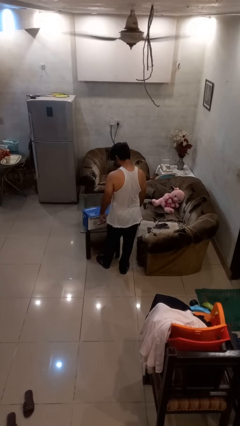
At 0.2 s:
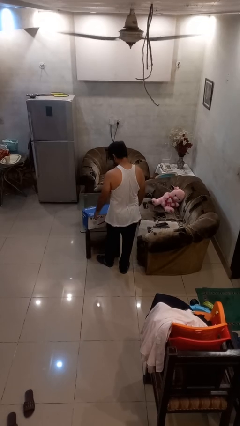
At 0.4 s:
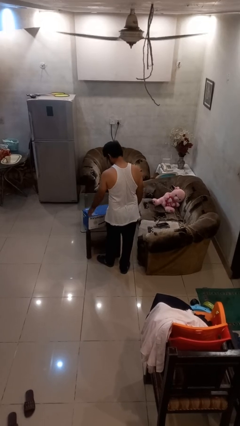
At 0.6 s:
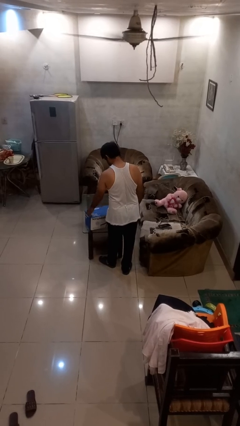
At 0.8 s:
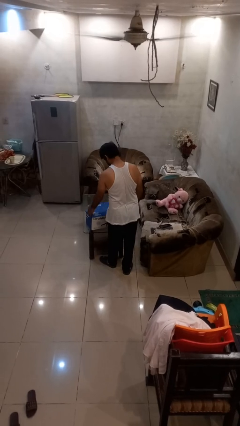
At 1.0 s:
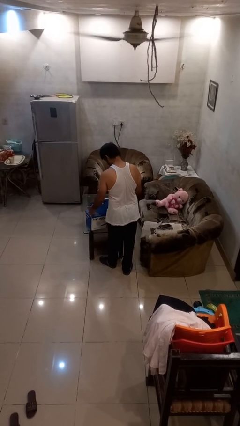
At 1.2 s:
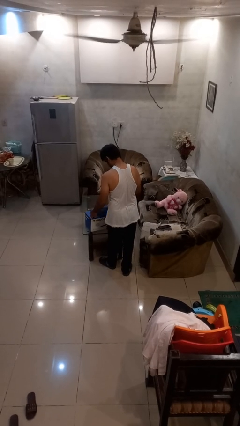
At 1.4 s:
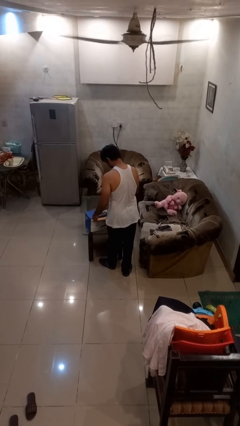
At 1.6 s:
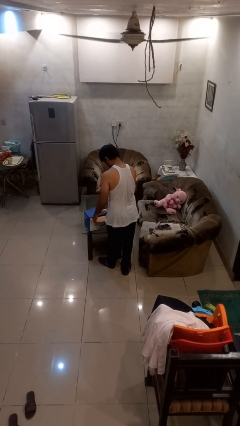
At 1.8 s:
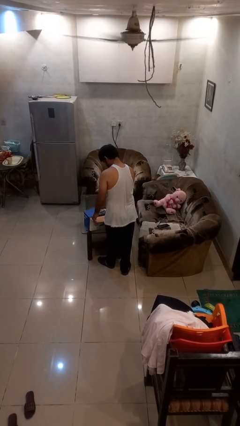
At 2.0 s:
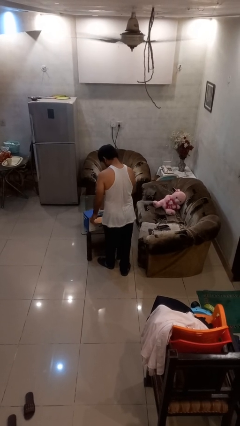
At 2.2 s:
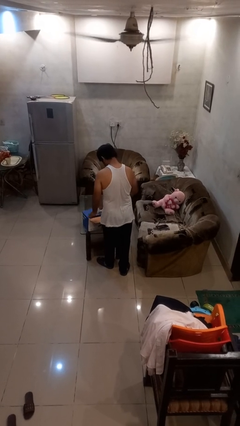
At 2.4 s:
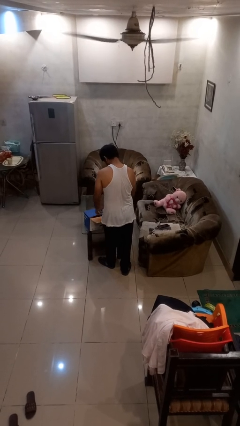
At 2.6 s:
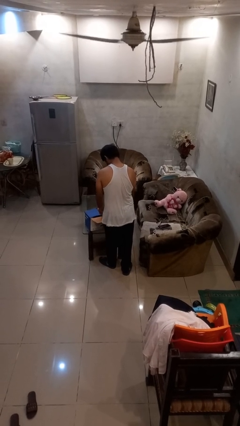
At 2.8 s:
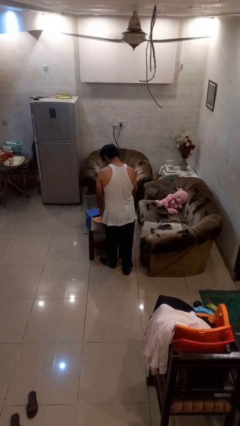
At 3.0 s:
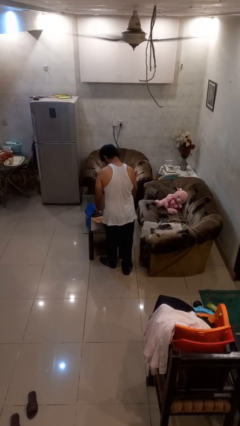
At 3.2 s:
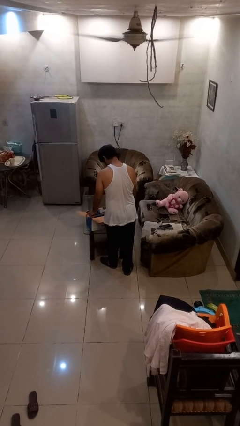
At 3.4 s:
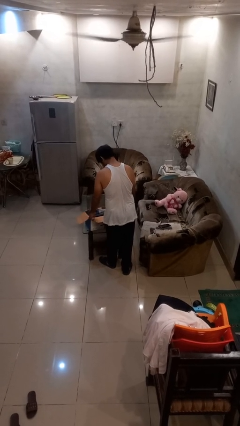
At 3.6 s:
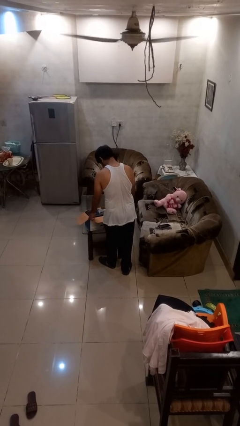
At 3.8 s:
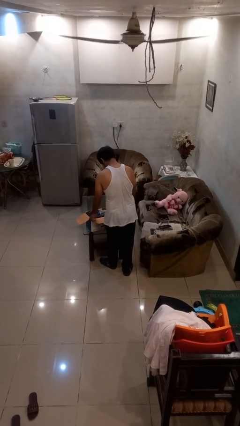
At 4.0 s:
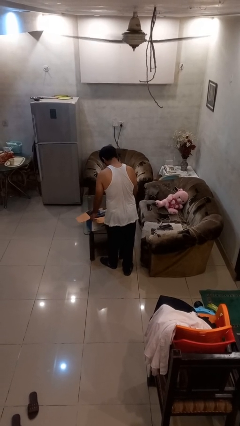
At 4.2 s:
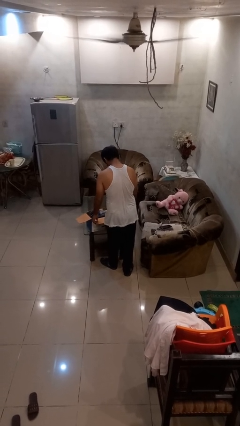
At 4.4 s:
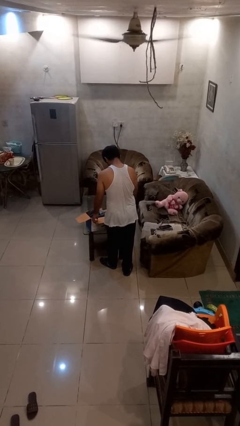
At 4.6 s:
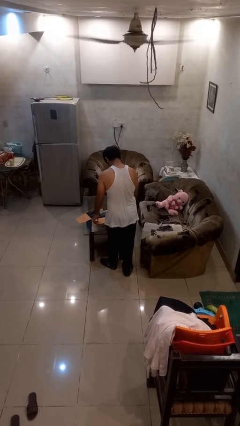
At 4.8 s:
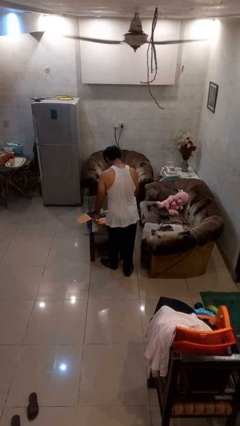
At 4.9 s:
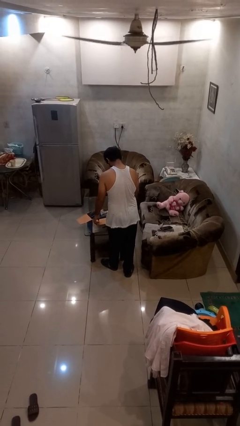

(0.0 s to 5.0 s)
person opens box

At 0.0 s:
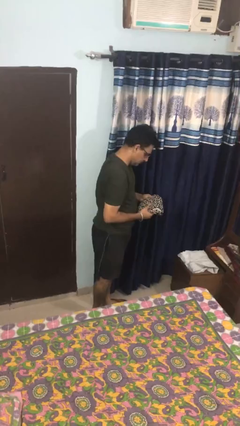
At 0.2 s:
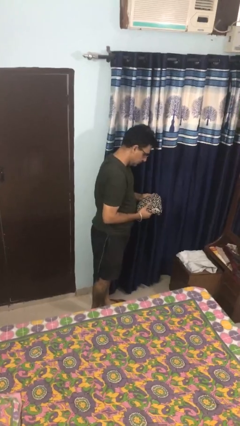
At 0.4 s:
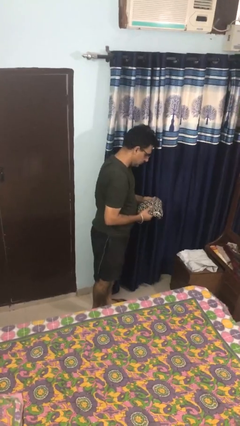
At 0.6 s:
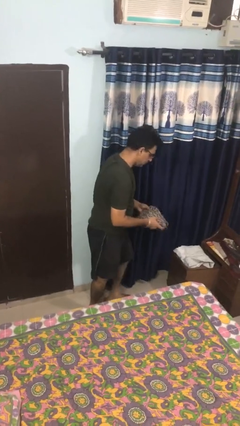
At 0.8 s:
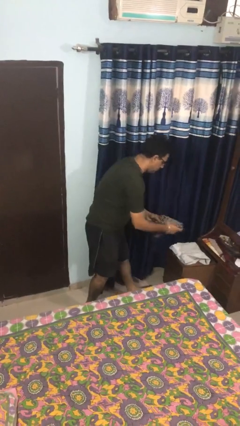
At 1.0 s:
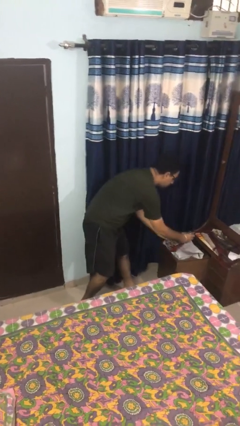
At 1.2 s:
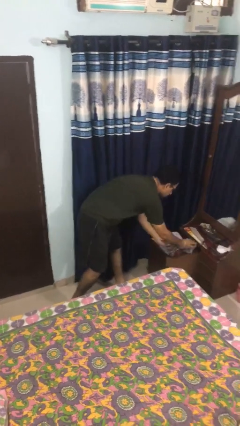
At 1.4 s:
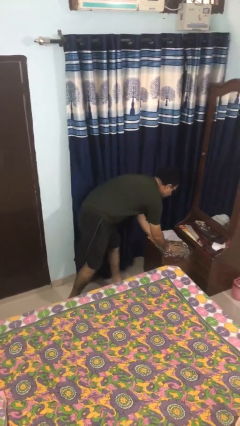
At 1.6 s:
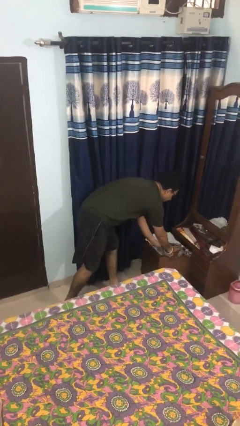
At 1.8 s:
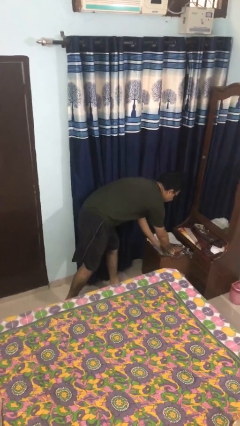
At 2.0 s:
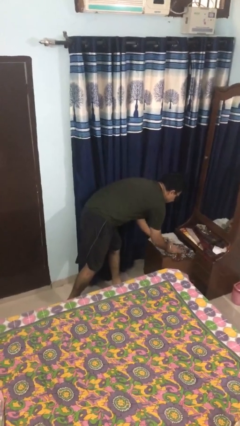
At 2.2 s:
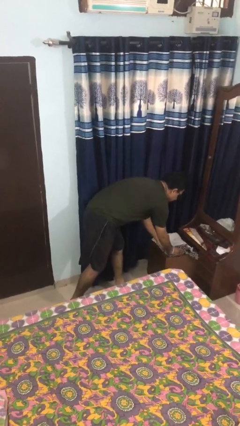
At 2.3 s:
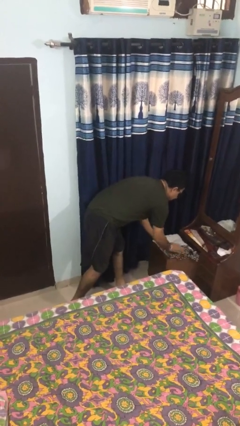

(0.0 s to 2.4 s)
person puts clothes into dresser

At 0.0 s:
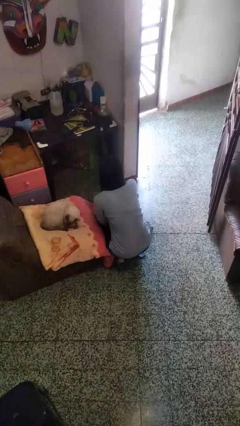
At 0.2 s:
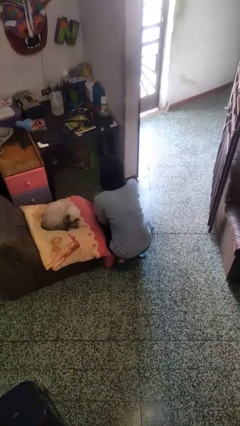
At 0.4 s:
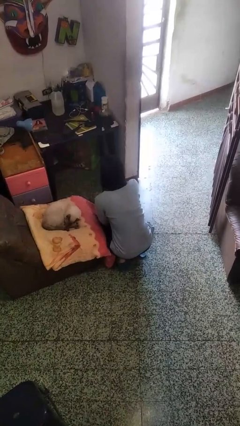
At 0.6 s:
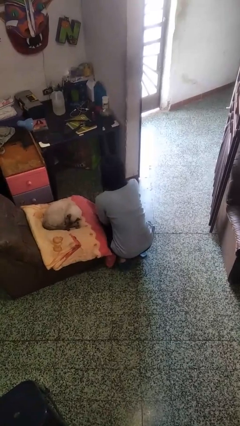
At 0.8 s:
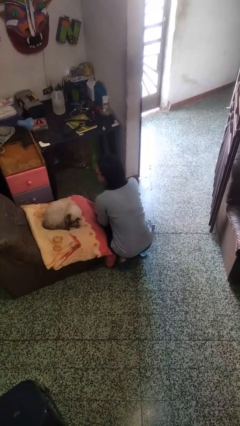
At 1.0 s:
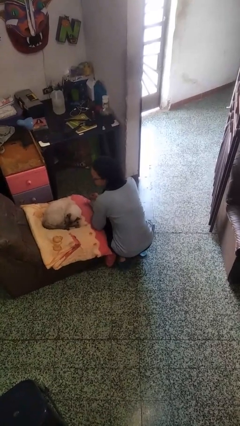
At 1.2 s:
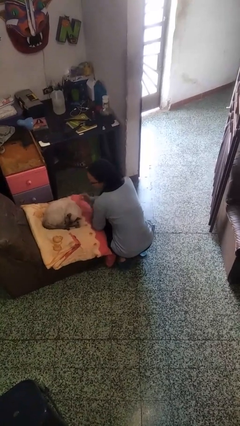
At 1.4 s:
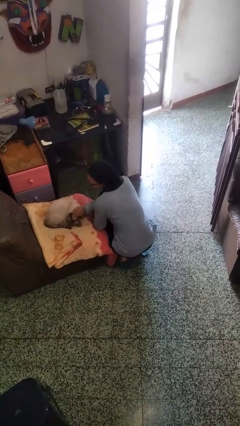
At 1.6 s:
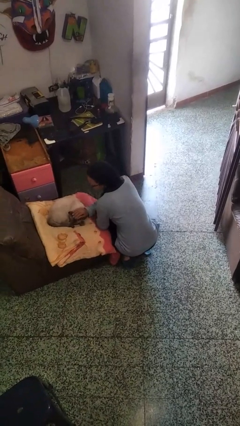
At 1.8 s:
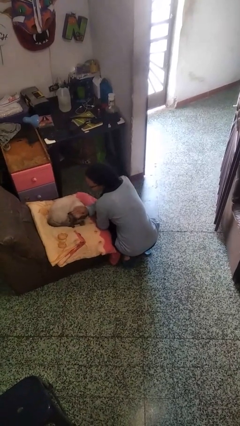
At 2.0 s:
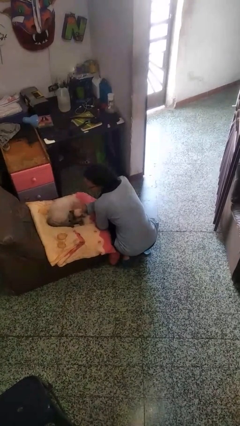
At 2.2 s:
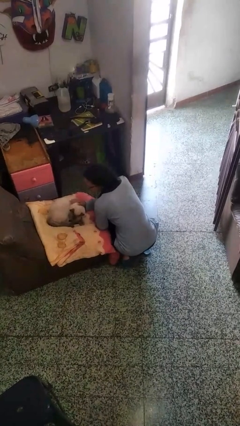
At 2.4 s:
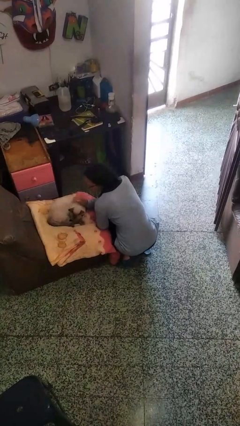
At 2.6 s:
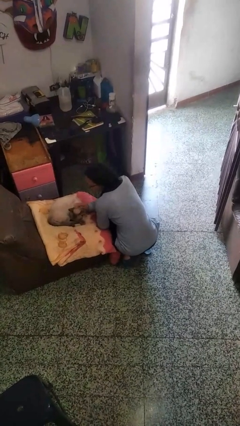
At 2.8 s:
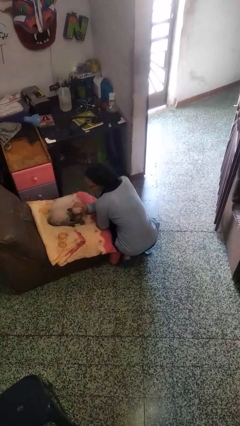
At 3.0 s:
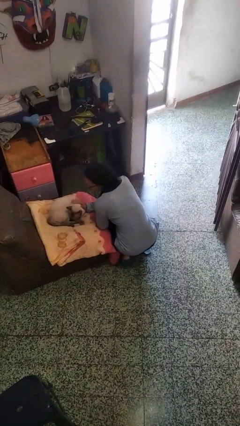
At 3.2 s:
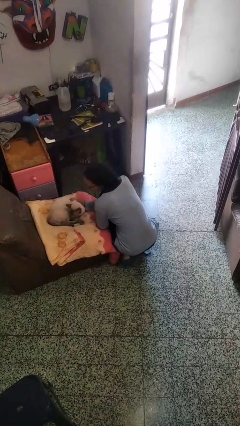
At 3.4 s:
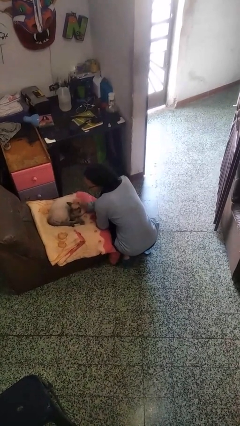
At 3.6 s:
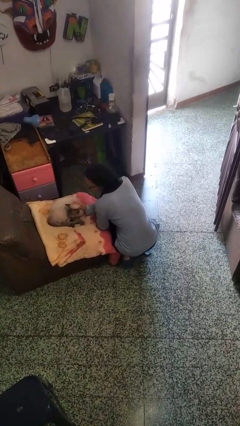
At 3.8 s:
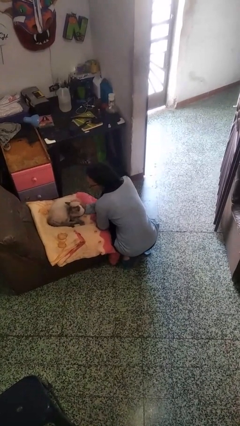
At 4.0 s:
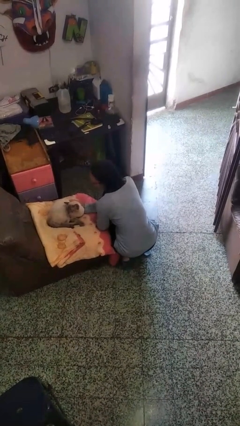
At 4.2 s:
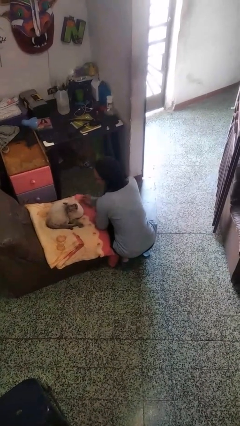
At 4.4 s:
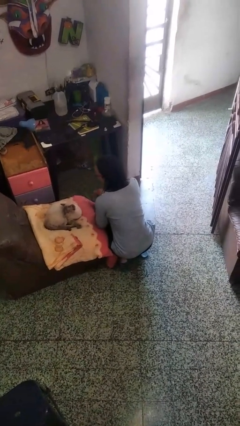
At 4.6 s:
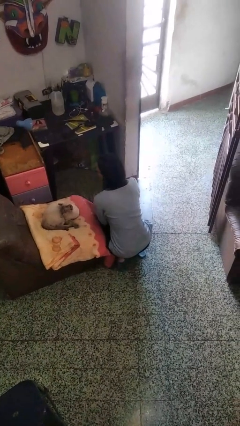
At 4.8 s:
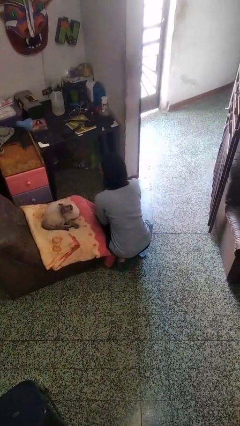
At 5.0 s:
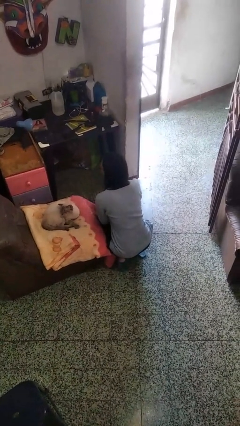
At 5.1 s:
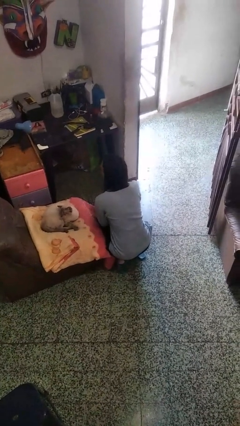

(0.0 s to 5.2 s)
person pets cat

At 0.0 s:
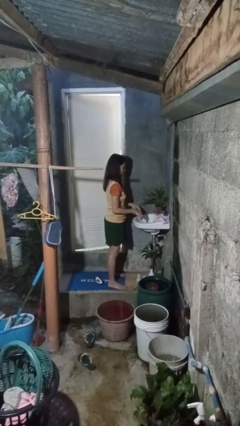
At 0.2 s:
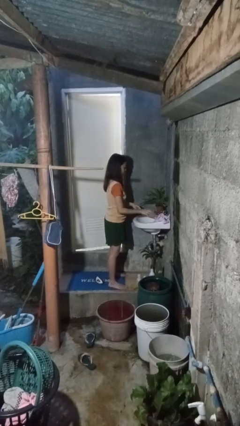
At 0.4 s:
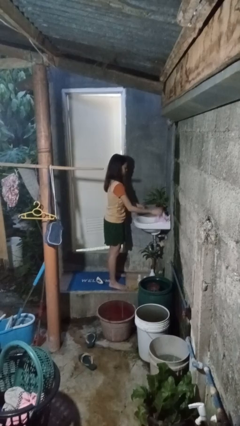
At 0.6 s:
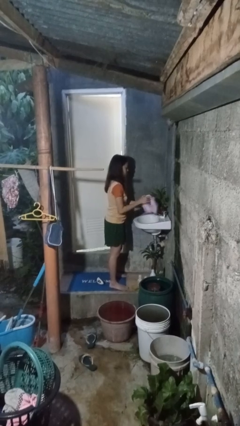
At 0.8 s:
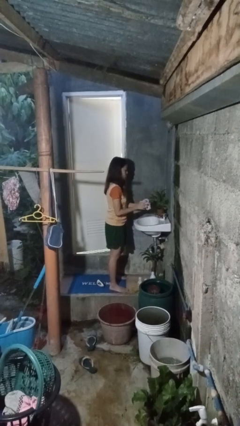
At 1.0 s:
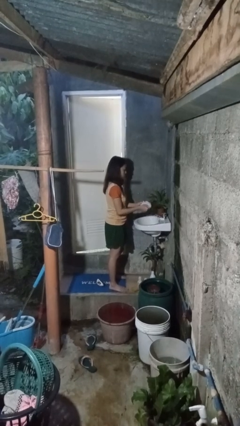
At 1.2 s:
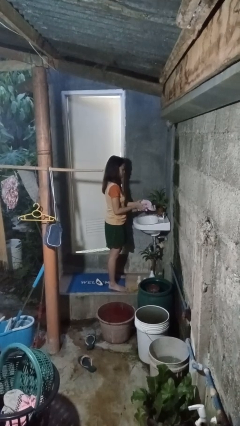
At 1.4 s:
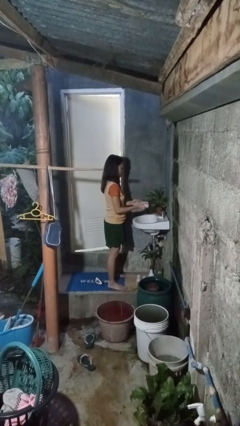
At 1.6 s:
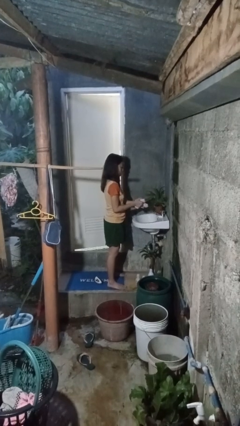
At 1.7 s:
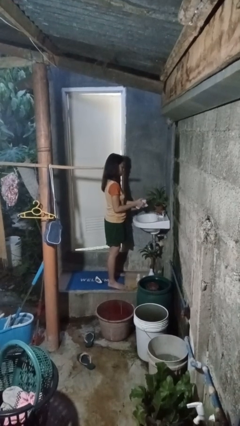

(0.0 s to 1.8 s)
person dries hands with towel

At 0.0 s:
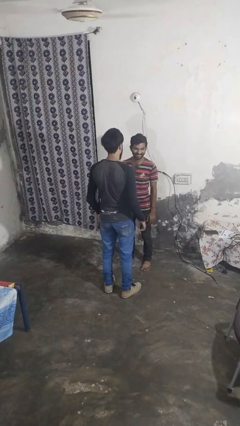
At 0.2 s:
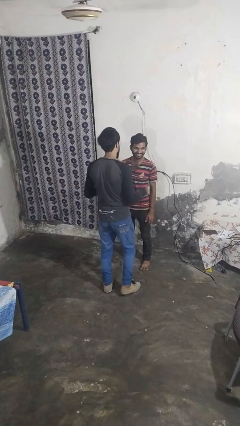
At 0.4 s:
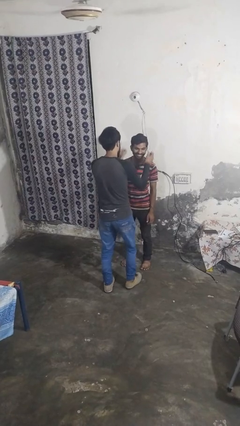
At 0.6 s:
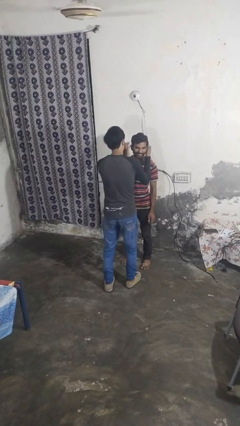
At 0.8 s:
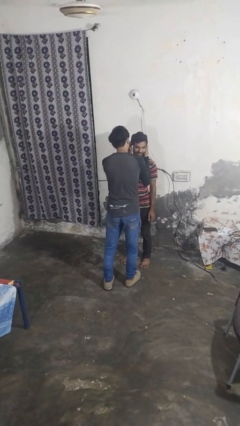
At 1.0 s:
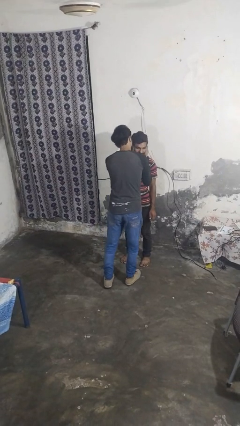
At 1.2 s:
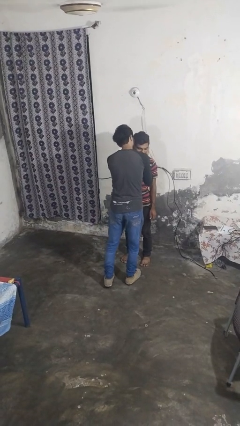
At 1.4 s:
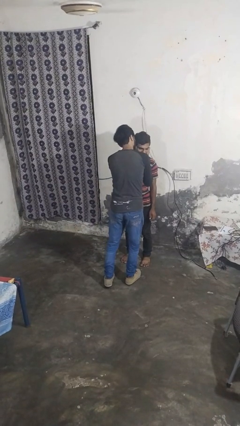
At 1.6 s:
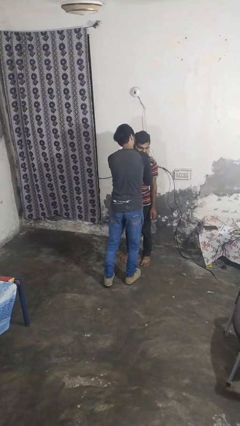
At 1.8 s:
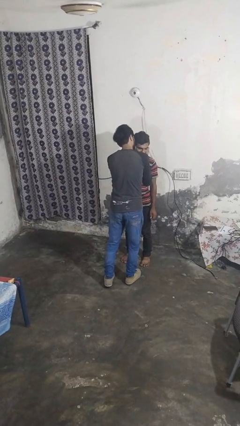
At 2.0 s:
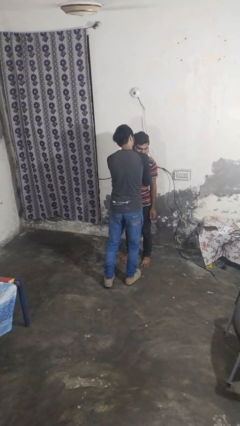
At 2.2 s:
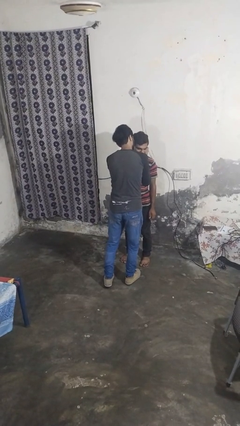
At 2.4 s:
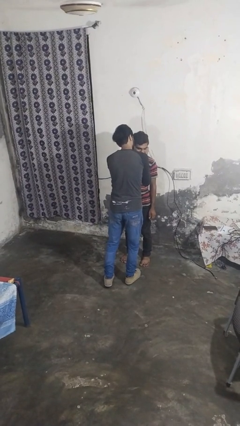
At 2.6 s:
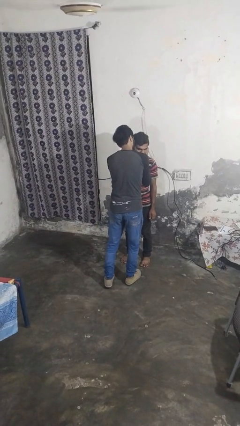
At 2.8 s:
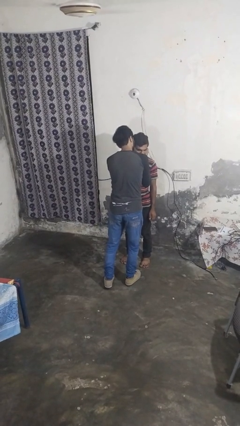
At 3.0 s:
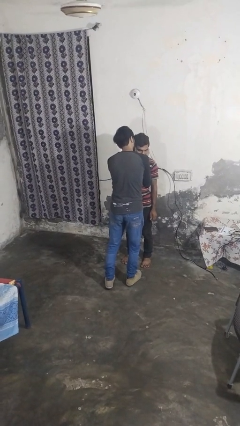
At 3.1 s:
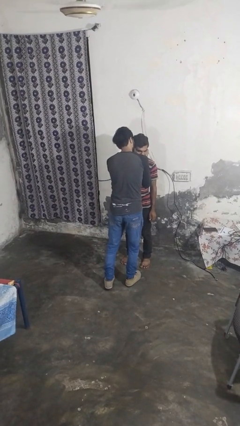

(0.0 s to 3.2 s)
person kisses cheek of person
